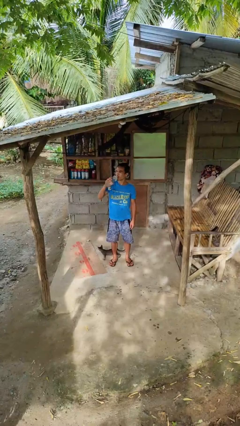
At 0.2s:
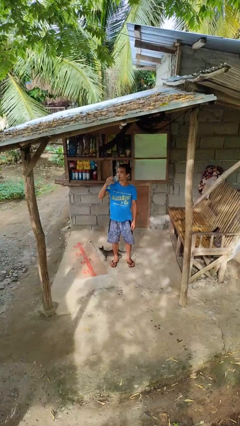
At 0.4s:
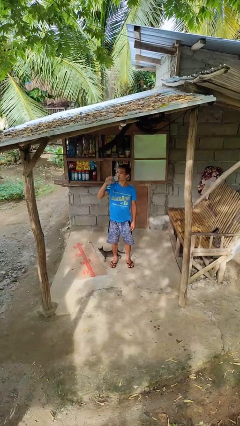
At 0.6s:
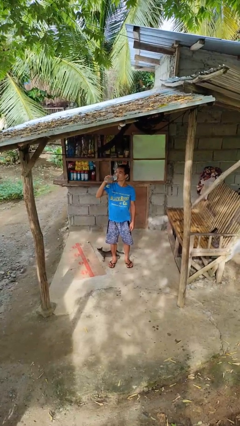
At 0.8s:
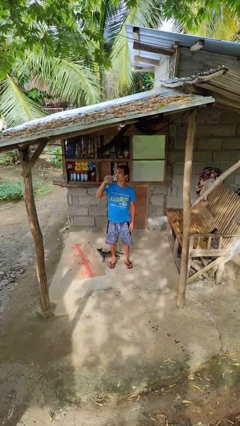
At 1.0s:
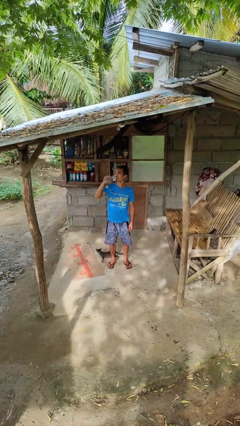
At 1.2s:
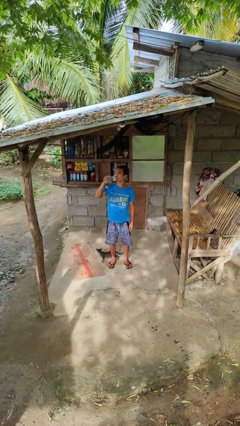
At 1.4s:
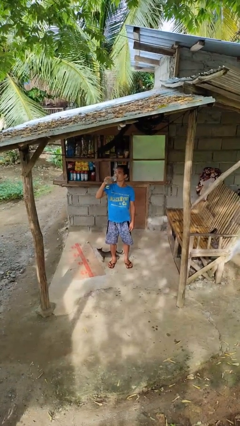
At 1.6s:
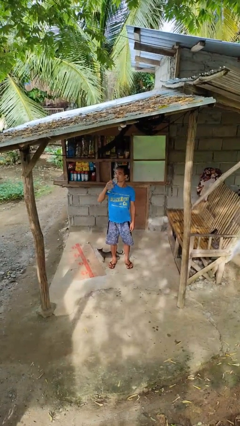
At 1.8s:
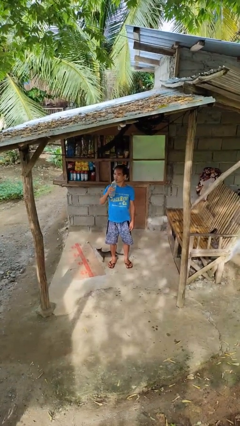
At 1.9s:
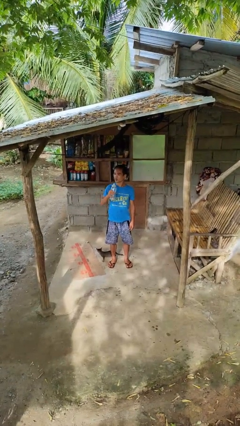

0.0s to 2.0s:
person drinks from bottle

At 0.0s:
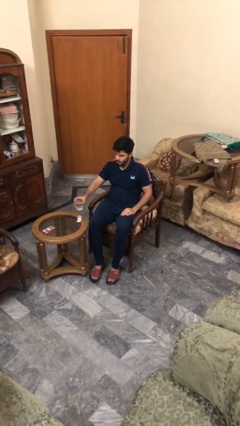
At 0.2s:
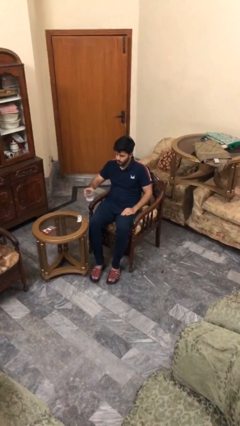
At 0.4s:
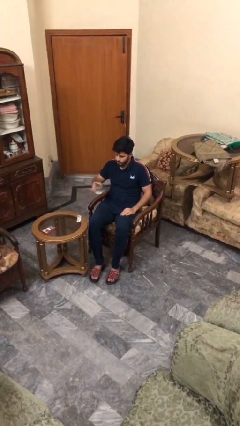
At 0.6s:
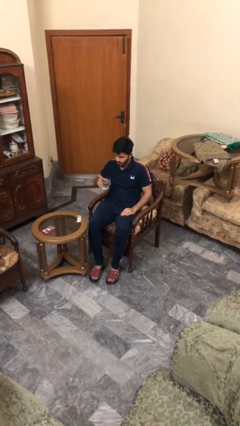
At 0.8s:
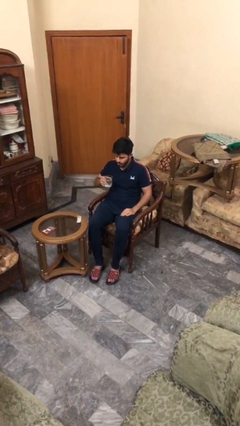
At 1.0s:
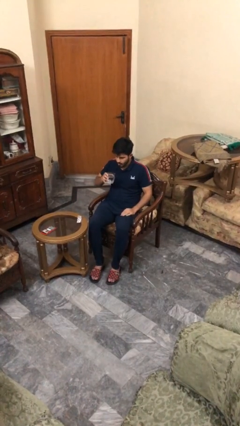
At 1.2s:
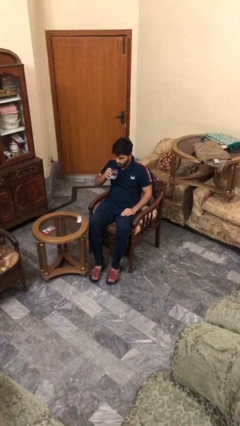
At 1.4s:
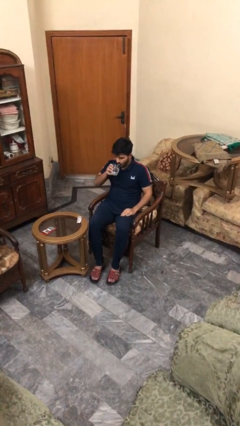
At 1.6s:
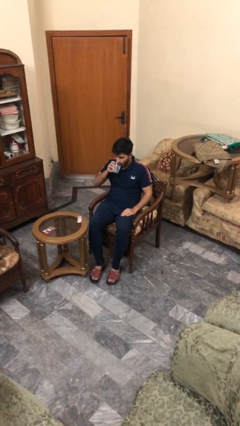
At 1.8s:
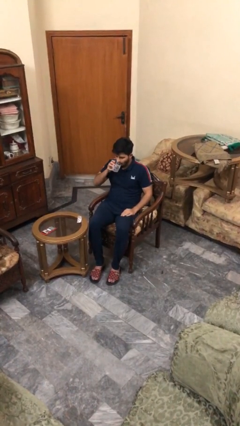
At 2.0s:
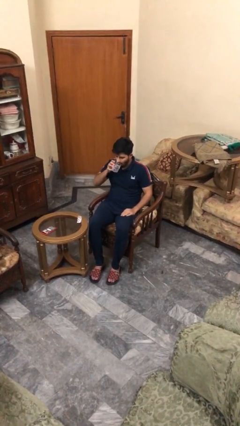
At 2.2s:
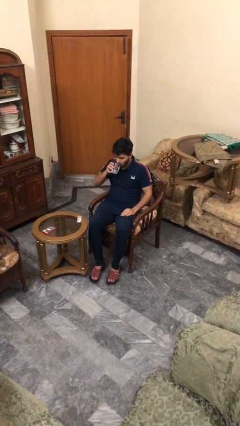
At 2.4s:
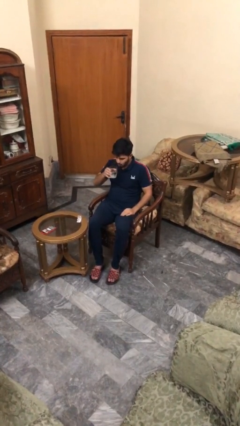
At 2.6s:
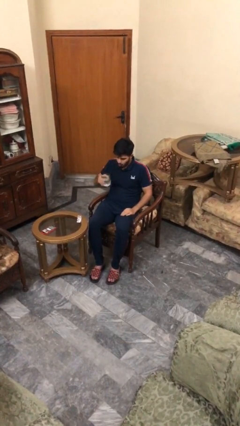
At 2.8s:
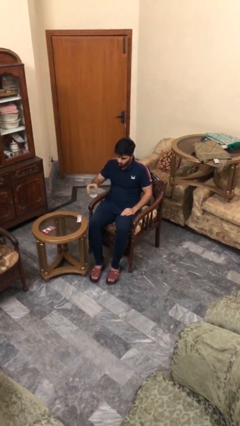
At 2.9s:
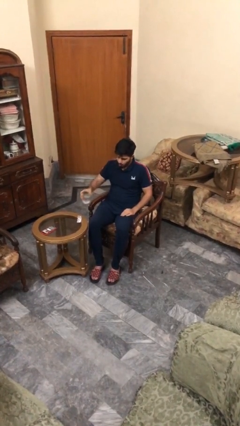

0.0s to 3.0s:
person drinks from cup

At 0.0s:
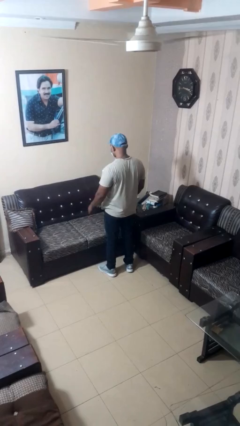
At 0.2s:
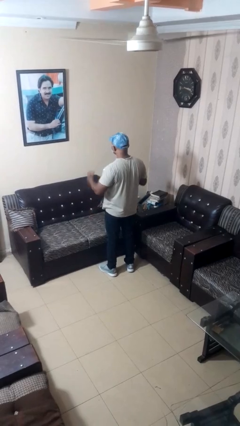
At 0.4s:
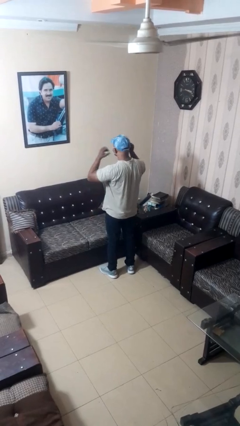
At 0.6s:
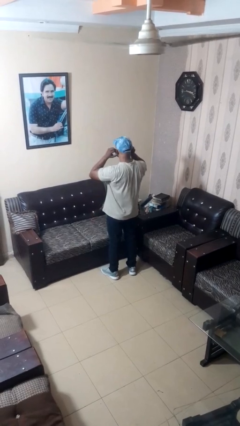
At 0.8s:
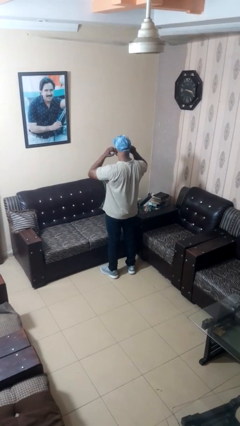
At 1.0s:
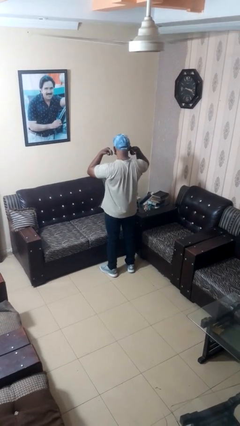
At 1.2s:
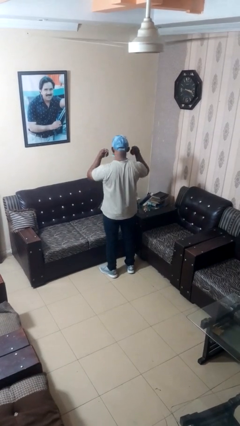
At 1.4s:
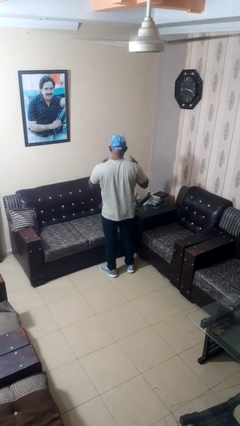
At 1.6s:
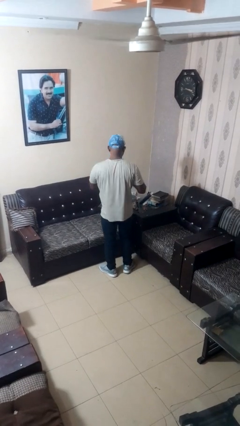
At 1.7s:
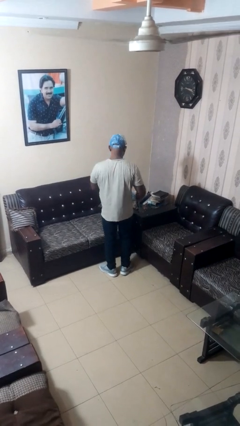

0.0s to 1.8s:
person takes off facemask

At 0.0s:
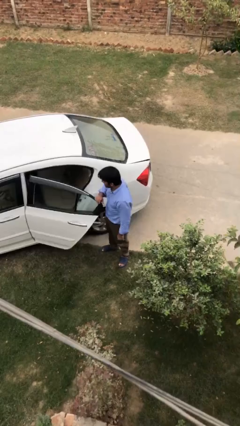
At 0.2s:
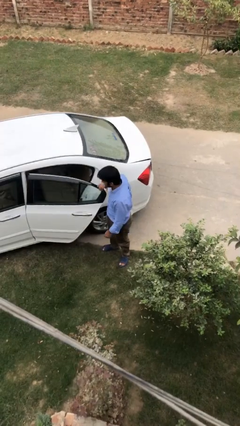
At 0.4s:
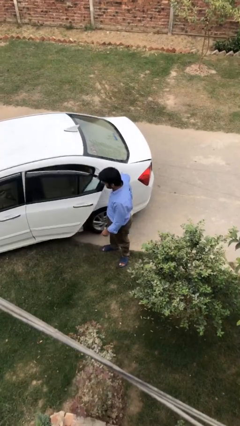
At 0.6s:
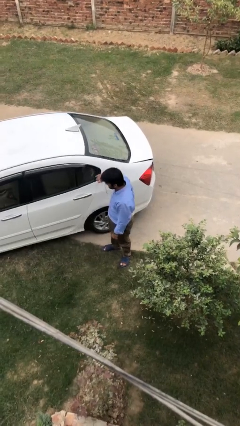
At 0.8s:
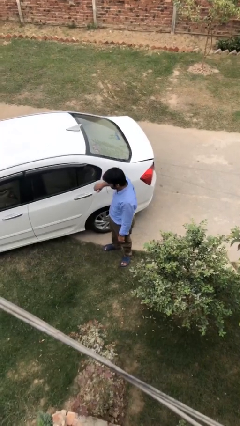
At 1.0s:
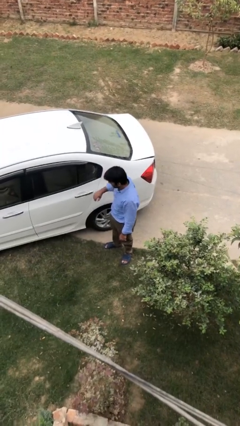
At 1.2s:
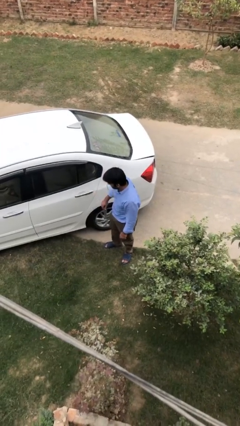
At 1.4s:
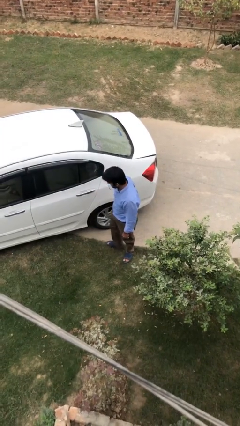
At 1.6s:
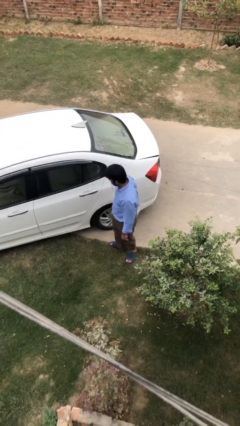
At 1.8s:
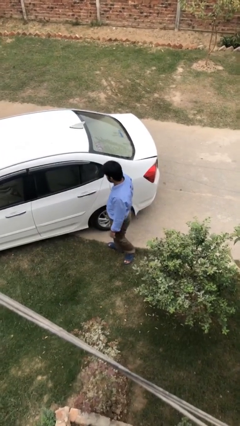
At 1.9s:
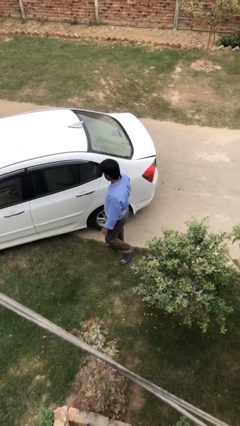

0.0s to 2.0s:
person closes car door

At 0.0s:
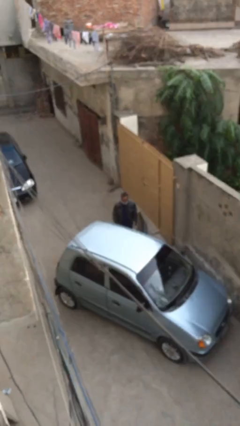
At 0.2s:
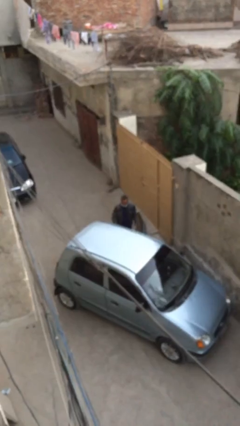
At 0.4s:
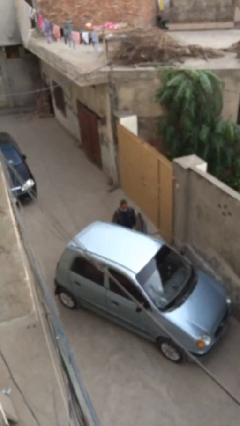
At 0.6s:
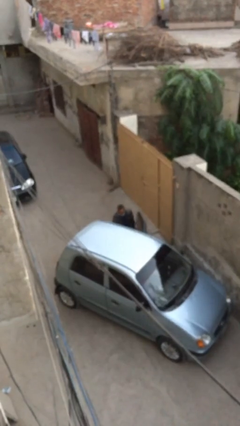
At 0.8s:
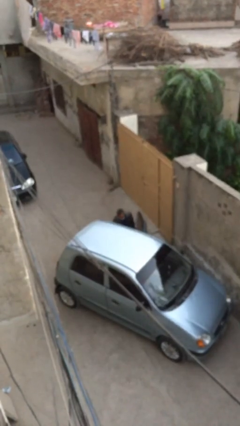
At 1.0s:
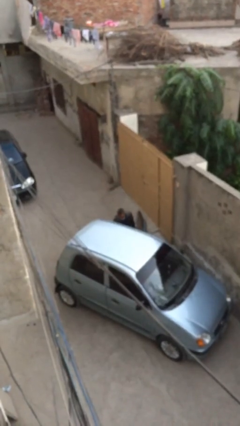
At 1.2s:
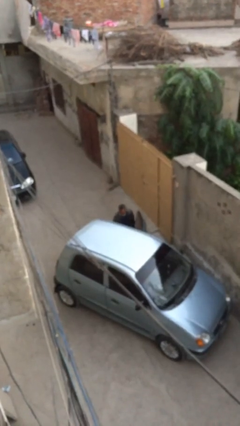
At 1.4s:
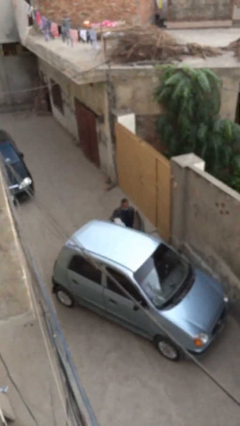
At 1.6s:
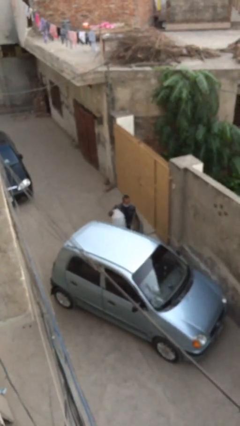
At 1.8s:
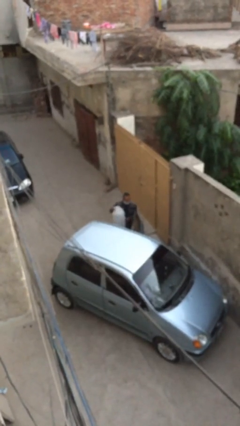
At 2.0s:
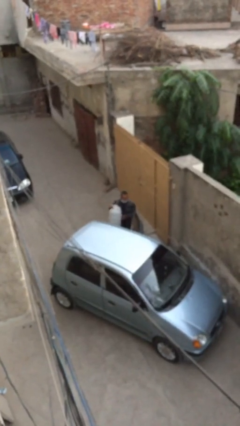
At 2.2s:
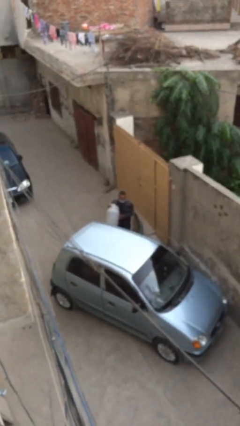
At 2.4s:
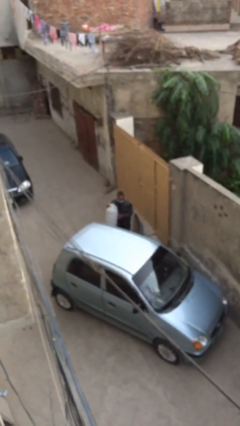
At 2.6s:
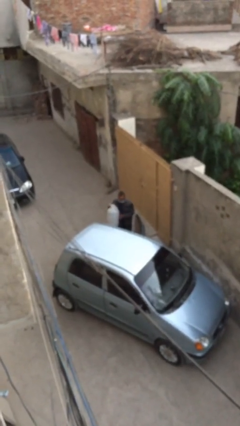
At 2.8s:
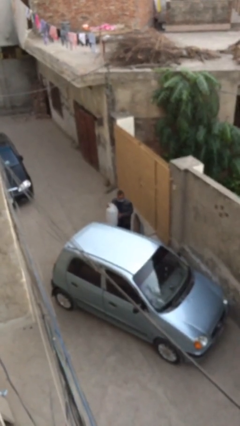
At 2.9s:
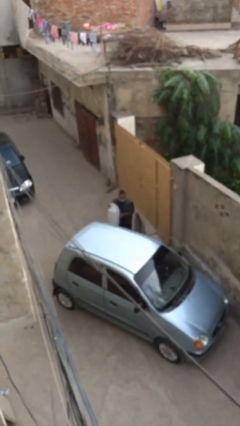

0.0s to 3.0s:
person unloads car

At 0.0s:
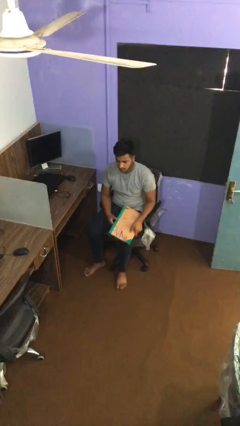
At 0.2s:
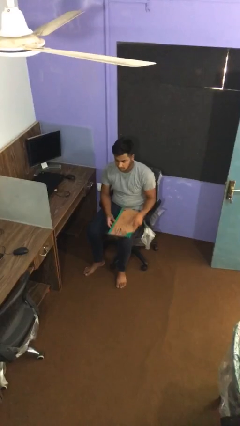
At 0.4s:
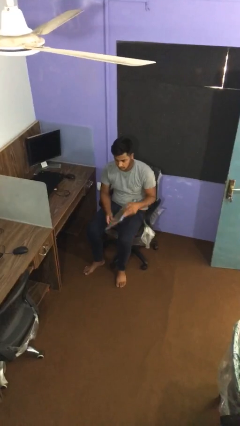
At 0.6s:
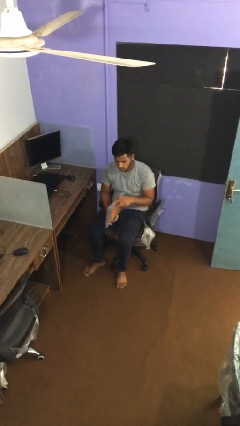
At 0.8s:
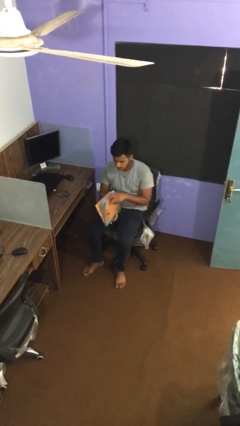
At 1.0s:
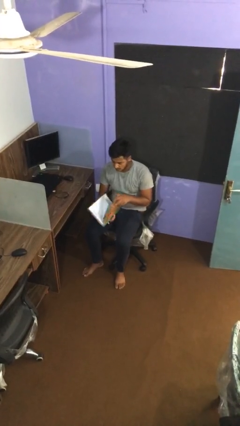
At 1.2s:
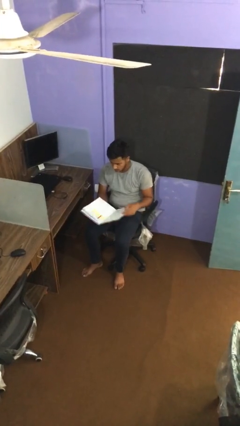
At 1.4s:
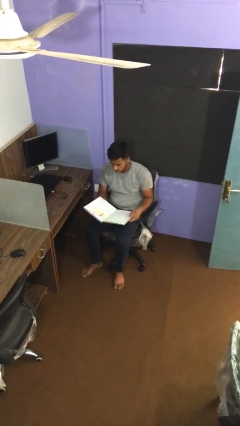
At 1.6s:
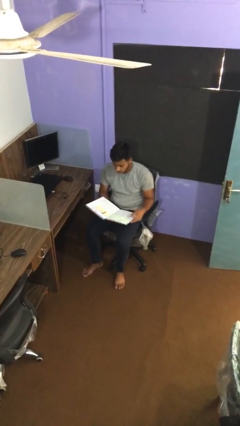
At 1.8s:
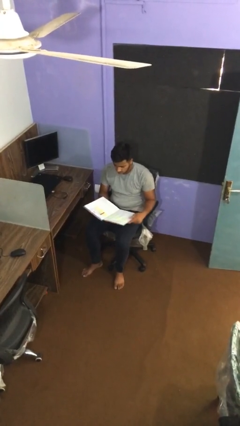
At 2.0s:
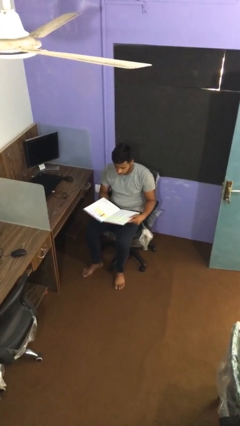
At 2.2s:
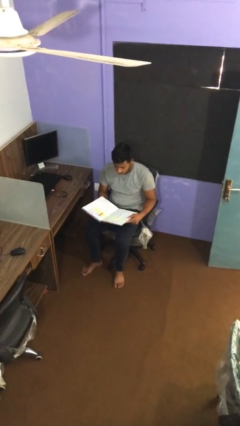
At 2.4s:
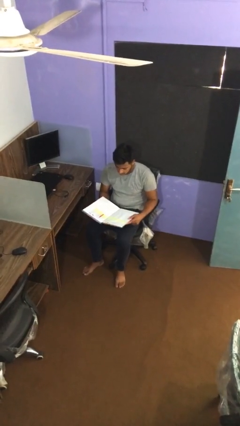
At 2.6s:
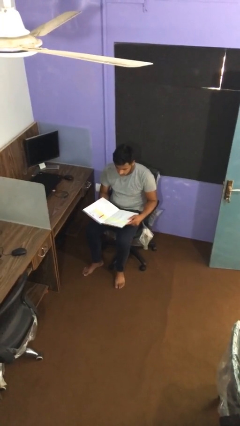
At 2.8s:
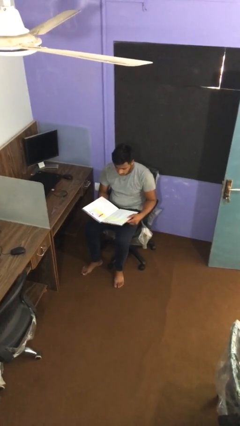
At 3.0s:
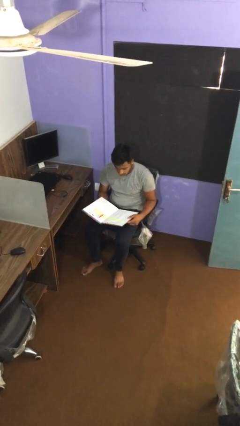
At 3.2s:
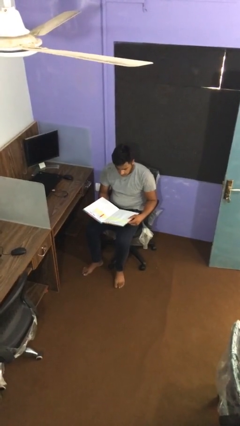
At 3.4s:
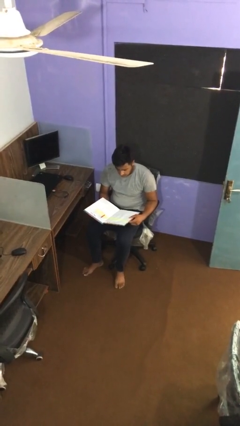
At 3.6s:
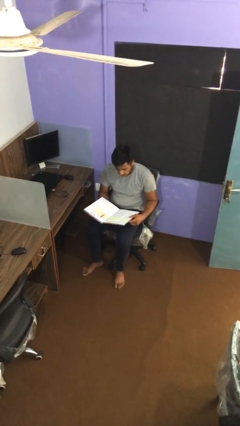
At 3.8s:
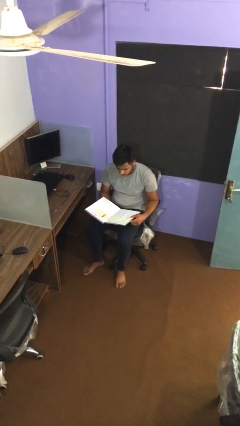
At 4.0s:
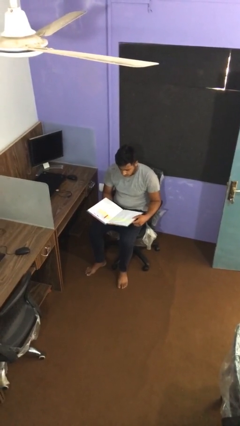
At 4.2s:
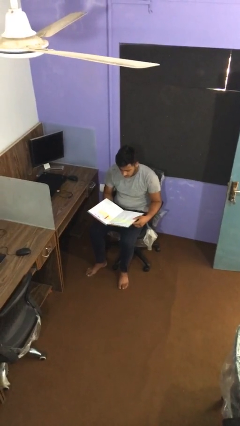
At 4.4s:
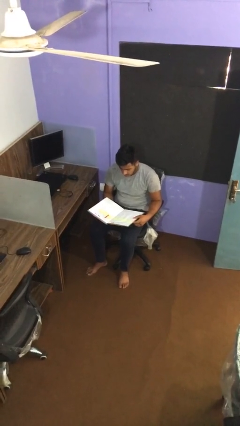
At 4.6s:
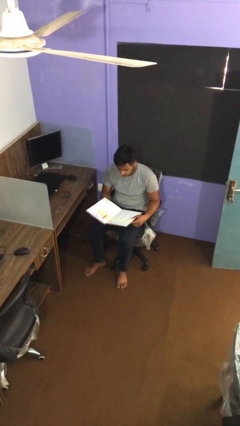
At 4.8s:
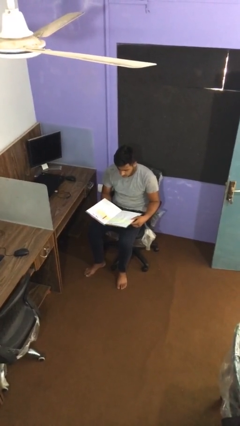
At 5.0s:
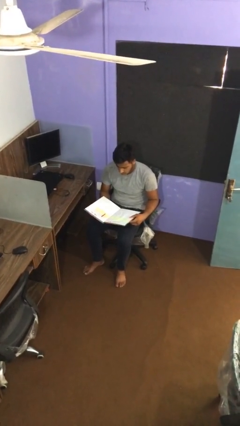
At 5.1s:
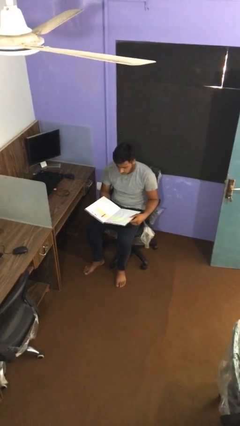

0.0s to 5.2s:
person reads document

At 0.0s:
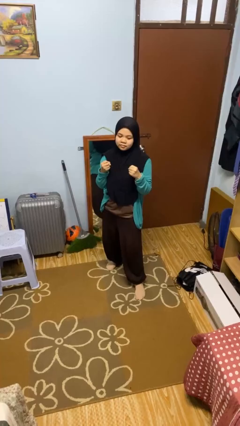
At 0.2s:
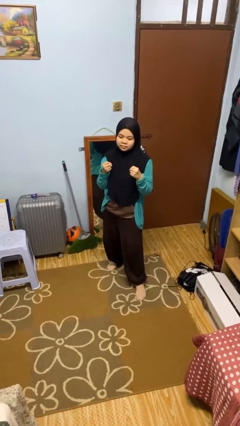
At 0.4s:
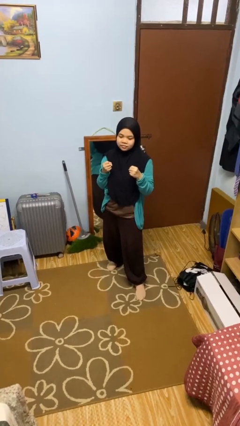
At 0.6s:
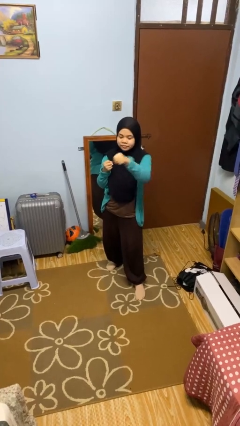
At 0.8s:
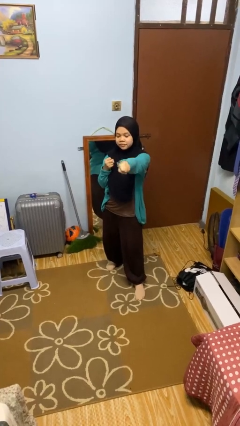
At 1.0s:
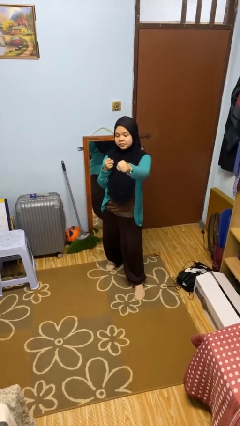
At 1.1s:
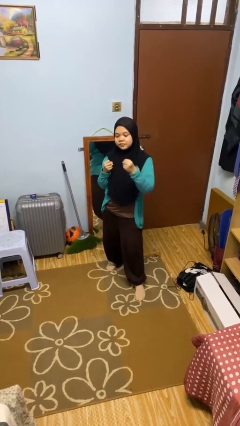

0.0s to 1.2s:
person punches
